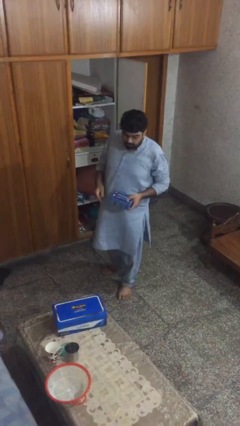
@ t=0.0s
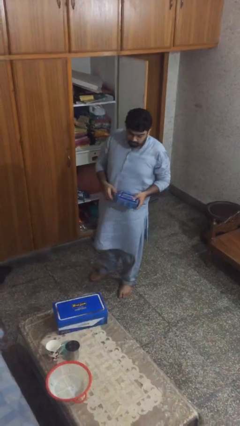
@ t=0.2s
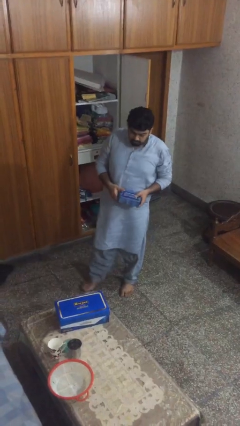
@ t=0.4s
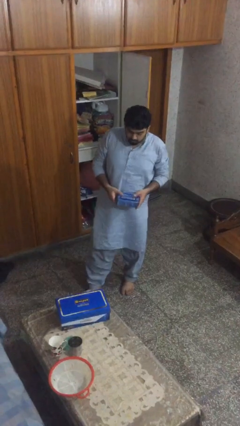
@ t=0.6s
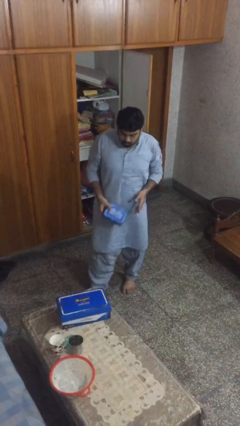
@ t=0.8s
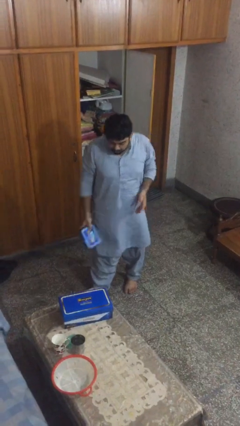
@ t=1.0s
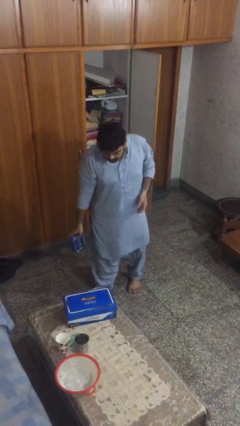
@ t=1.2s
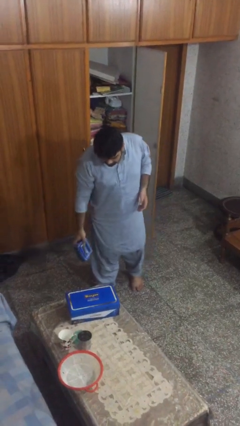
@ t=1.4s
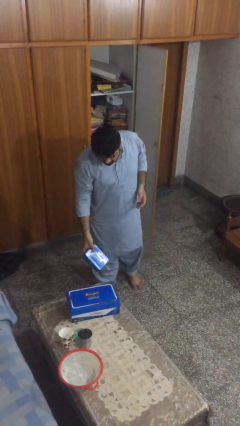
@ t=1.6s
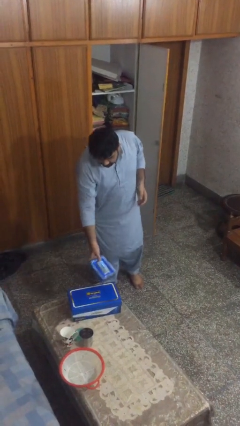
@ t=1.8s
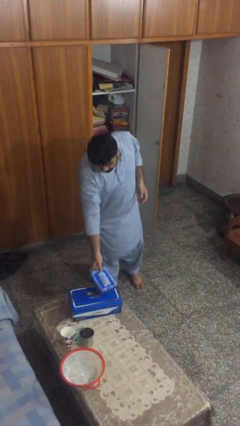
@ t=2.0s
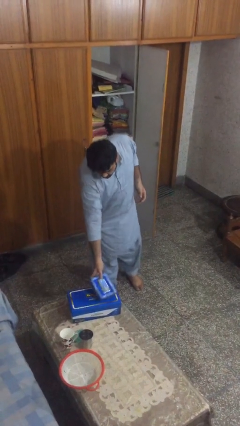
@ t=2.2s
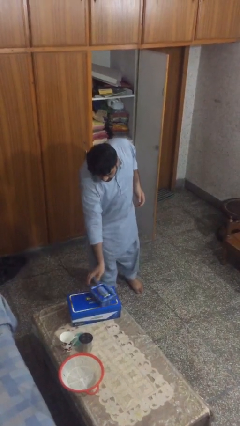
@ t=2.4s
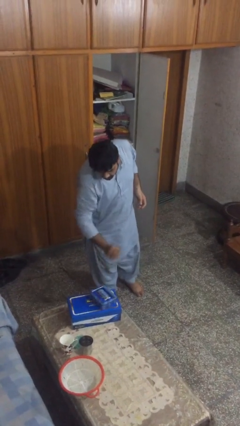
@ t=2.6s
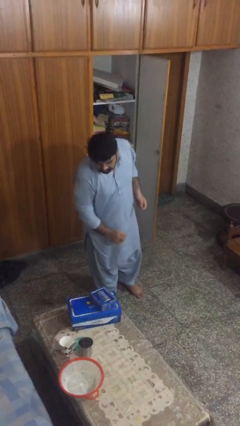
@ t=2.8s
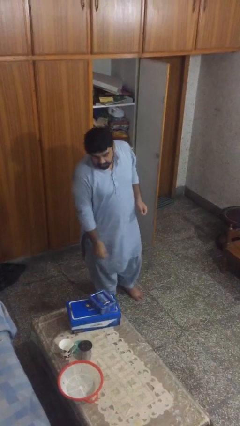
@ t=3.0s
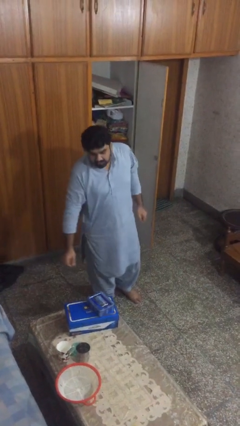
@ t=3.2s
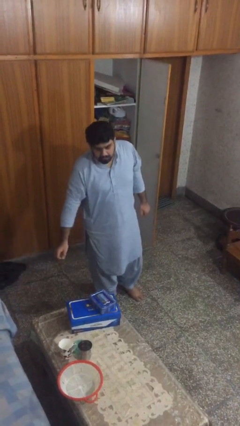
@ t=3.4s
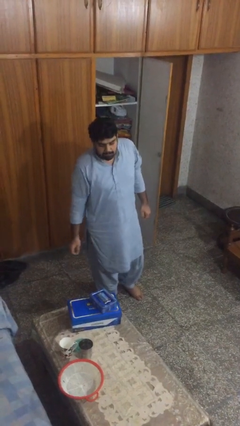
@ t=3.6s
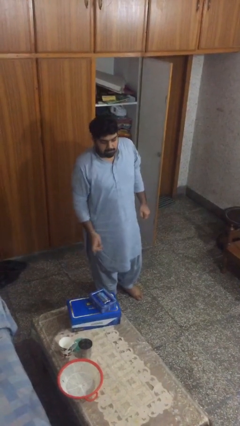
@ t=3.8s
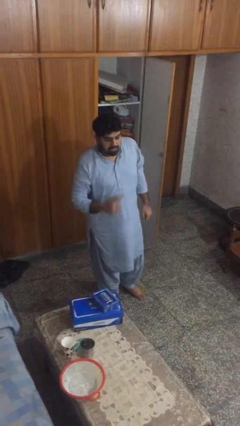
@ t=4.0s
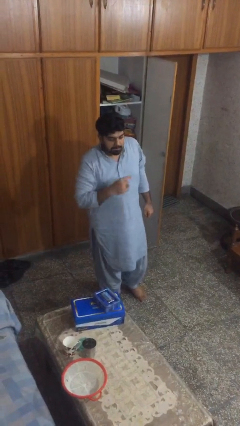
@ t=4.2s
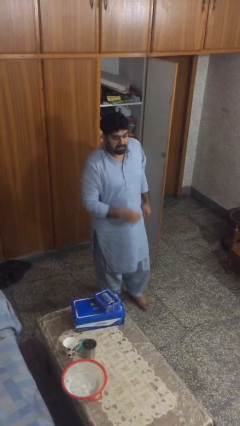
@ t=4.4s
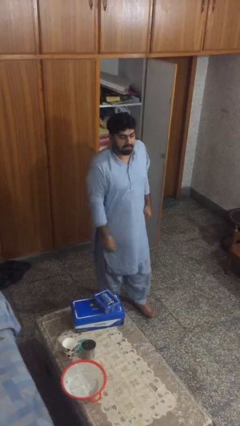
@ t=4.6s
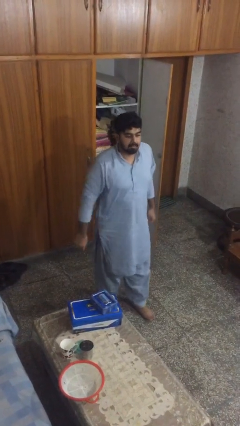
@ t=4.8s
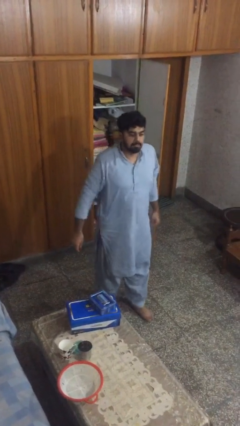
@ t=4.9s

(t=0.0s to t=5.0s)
person puts down object on table

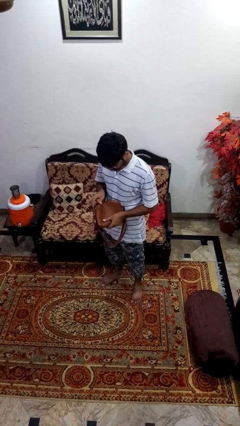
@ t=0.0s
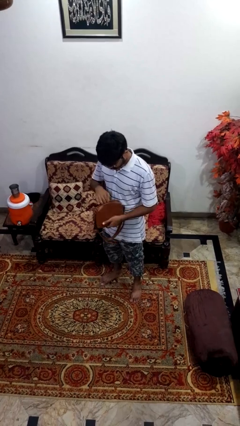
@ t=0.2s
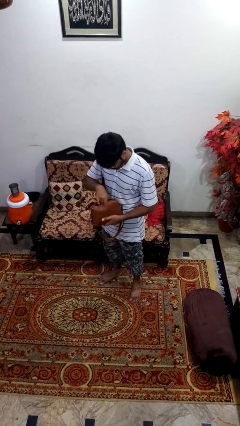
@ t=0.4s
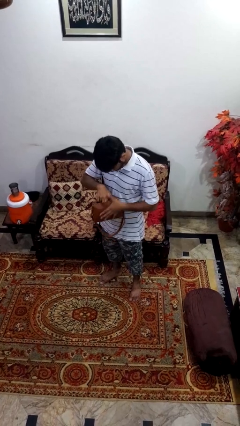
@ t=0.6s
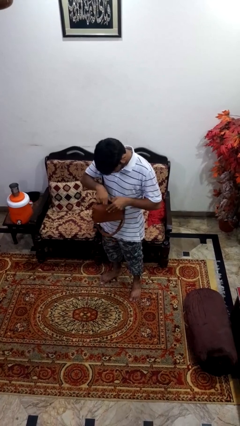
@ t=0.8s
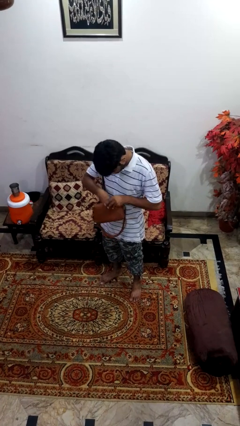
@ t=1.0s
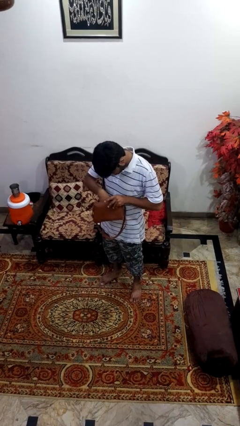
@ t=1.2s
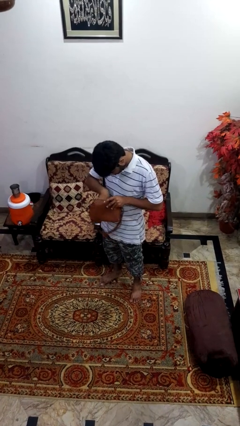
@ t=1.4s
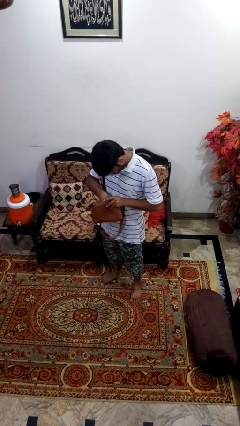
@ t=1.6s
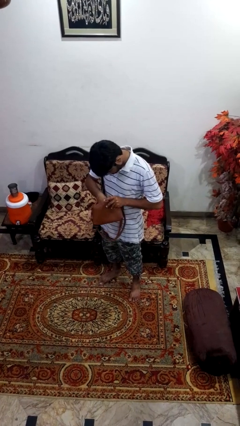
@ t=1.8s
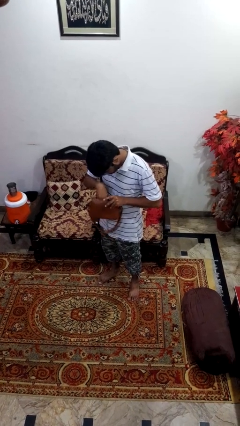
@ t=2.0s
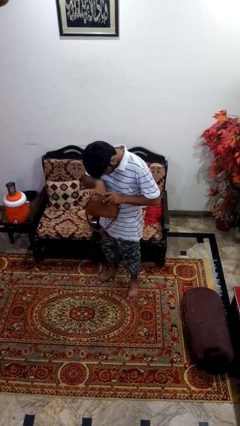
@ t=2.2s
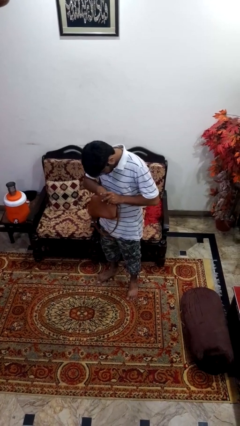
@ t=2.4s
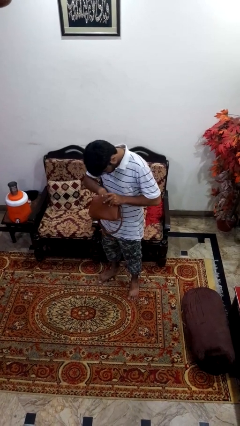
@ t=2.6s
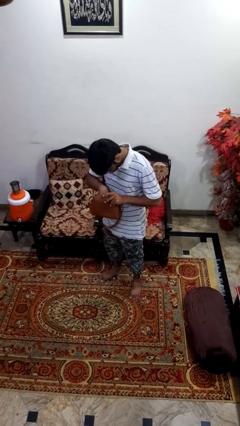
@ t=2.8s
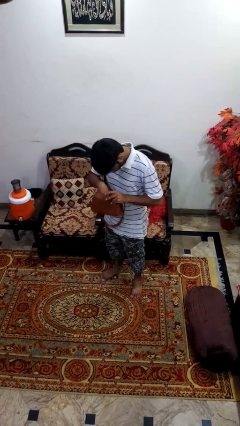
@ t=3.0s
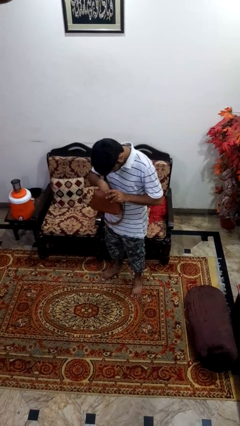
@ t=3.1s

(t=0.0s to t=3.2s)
person searches in purse

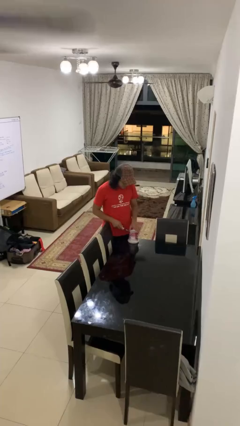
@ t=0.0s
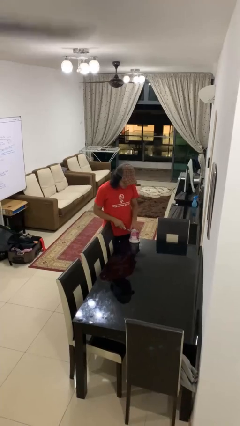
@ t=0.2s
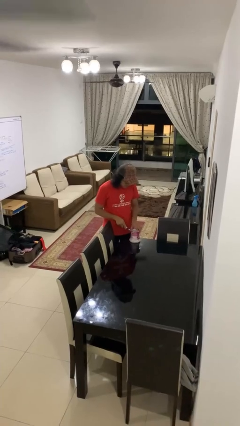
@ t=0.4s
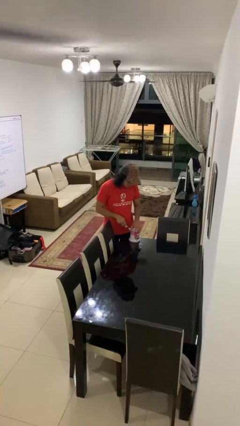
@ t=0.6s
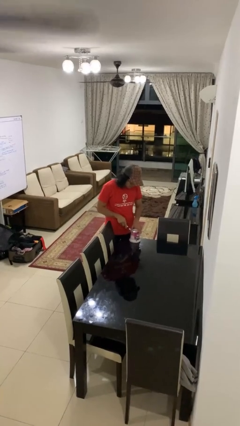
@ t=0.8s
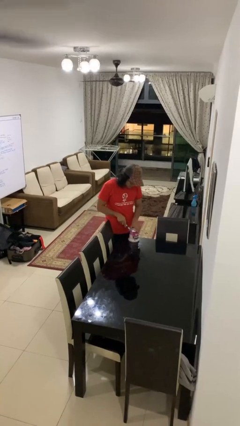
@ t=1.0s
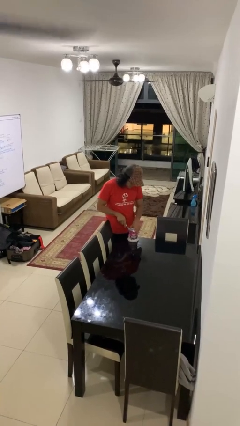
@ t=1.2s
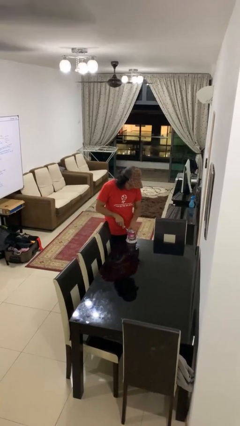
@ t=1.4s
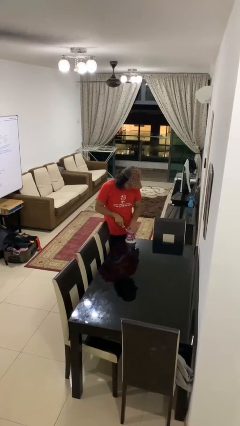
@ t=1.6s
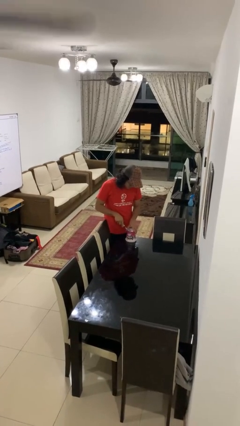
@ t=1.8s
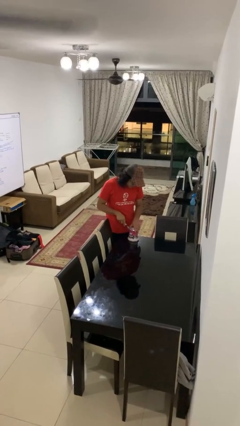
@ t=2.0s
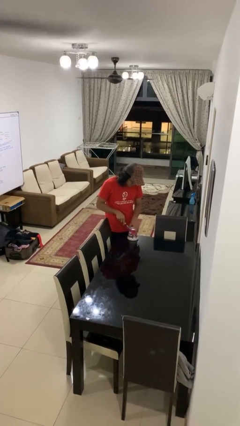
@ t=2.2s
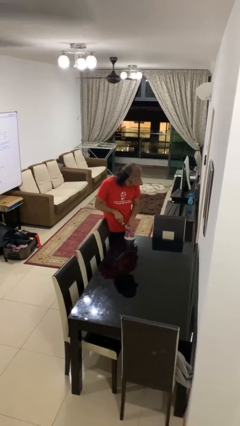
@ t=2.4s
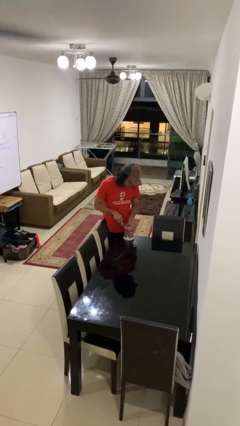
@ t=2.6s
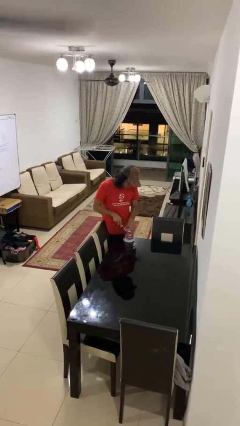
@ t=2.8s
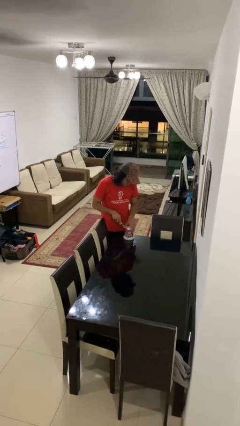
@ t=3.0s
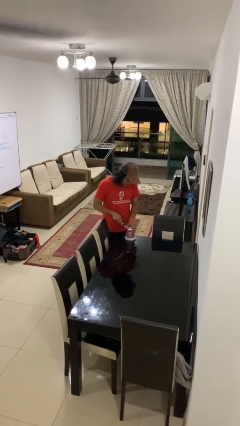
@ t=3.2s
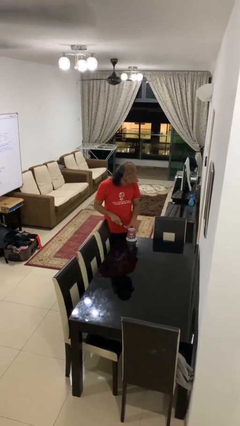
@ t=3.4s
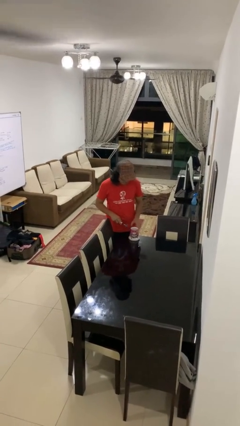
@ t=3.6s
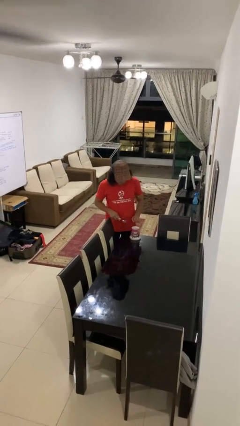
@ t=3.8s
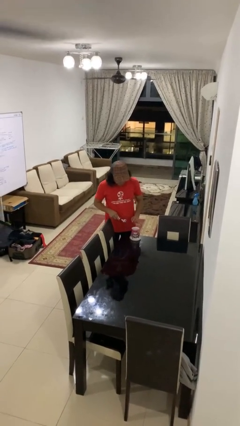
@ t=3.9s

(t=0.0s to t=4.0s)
person opens can with can opener

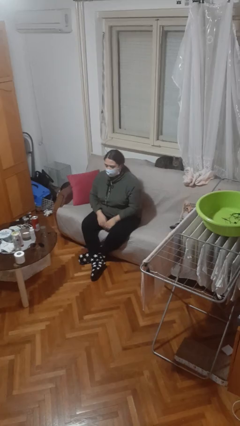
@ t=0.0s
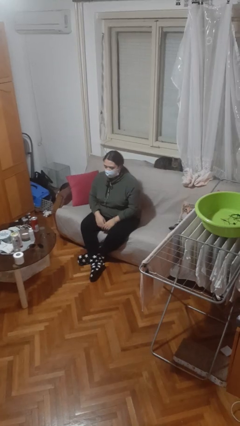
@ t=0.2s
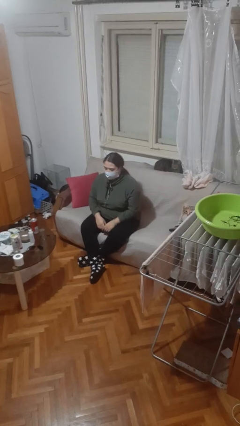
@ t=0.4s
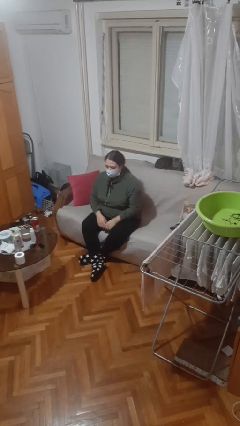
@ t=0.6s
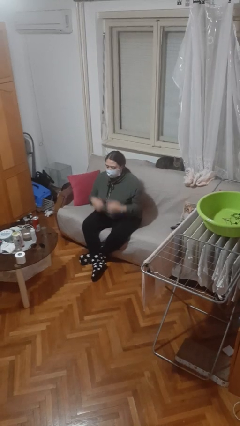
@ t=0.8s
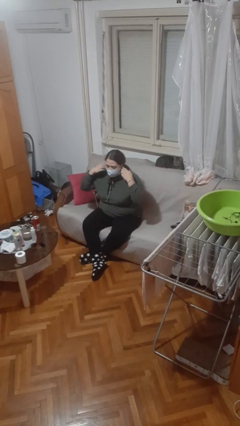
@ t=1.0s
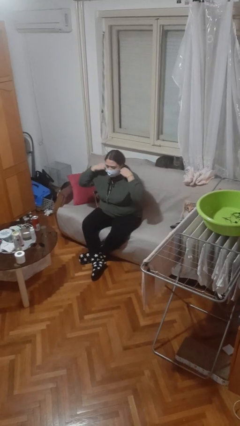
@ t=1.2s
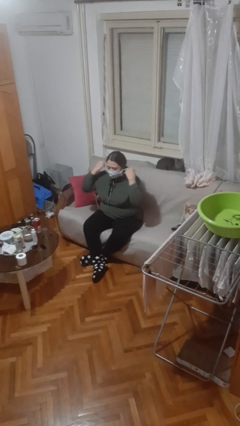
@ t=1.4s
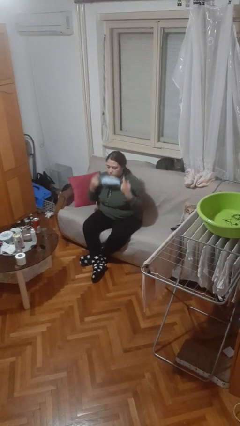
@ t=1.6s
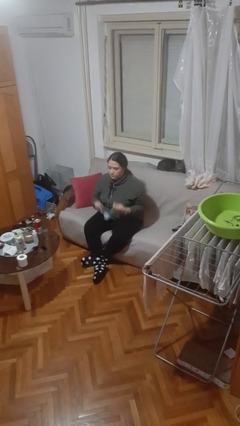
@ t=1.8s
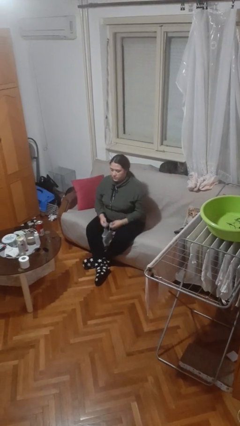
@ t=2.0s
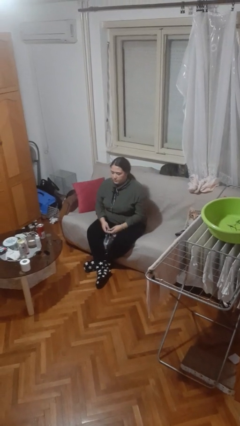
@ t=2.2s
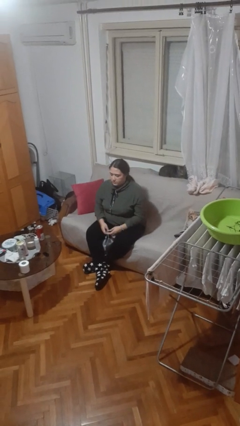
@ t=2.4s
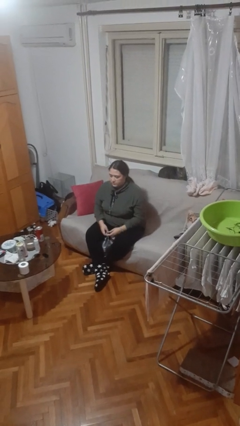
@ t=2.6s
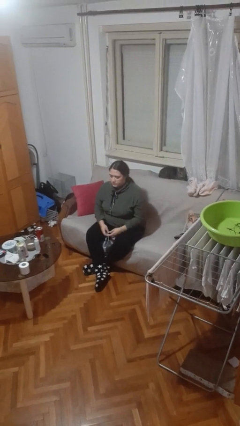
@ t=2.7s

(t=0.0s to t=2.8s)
person takes off facemask

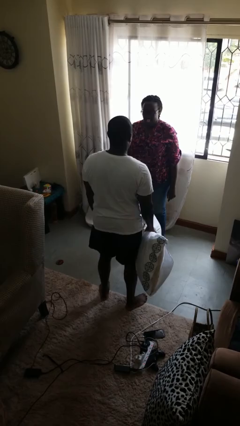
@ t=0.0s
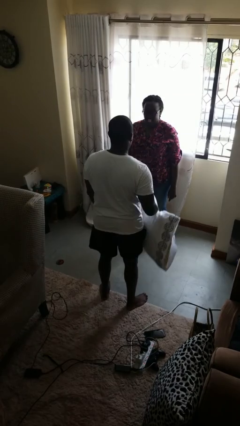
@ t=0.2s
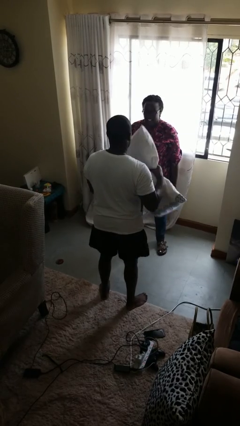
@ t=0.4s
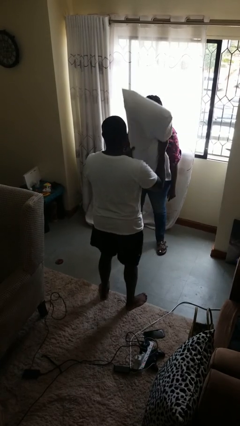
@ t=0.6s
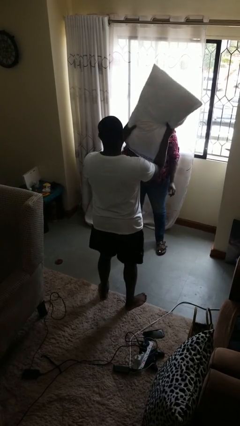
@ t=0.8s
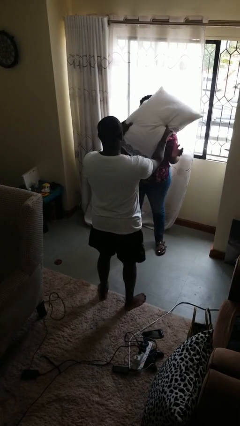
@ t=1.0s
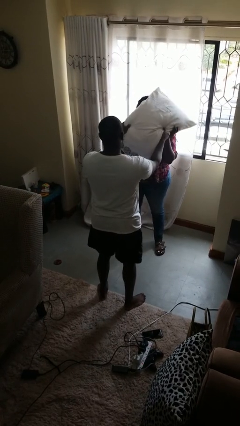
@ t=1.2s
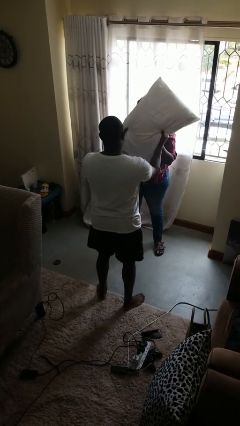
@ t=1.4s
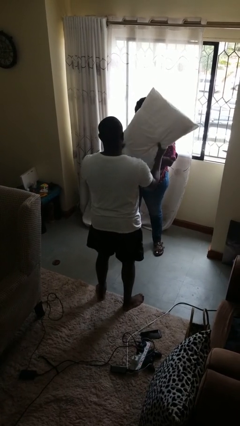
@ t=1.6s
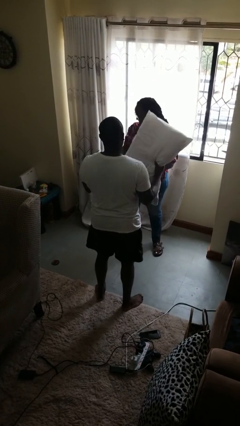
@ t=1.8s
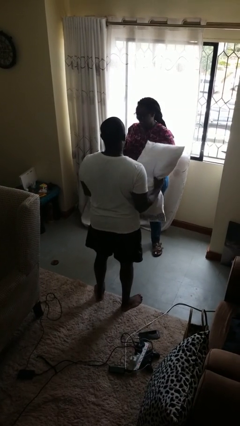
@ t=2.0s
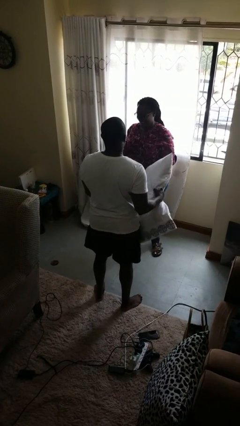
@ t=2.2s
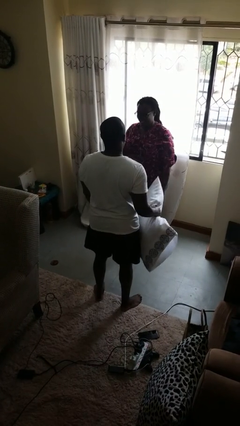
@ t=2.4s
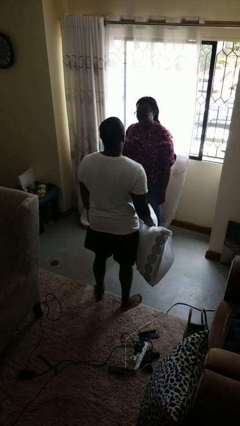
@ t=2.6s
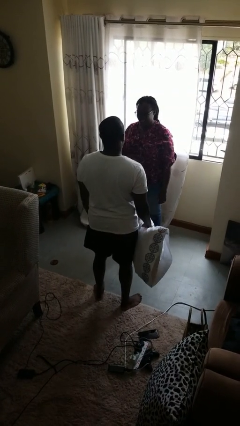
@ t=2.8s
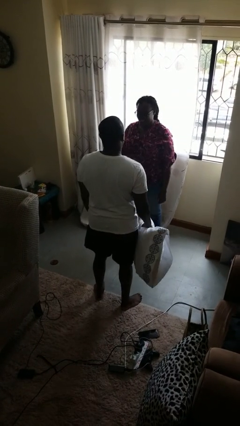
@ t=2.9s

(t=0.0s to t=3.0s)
person hits person with pillow
